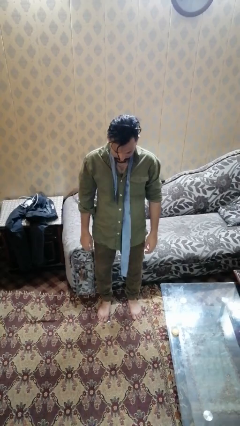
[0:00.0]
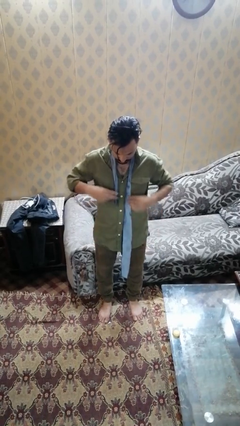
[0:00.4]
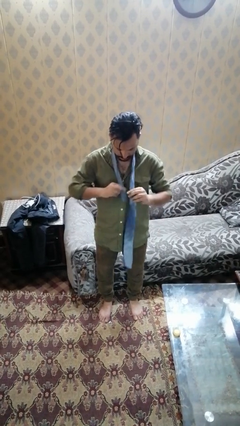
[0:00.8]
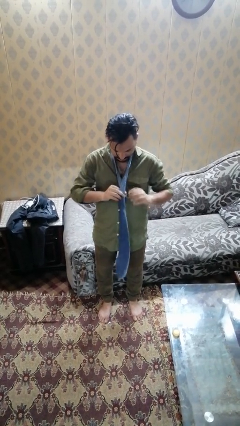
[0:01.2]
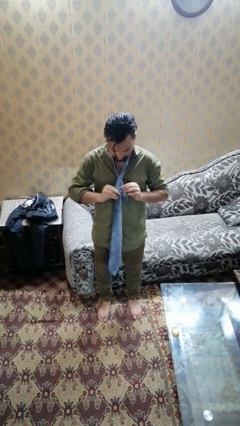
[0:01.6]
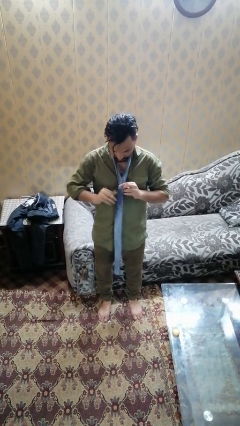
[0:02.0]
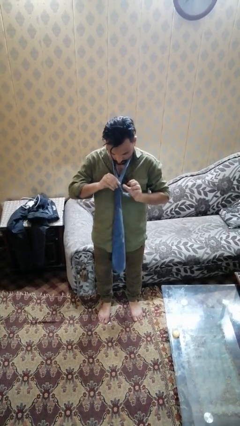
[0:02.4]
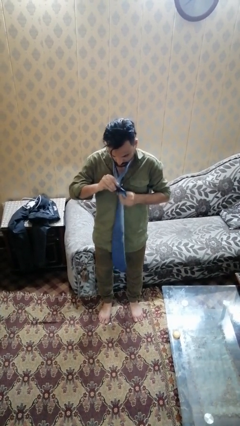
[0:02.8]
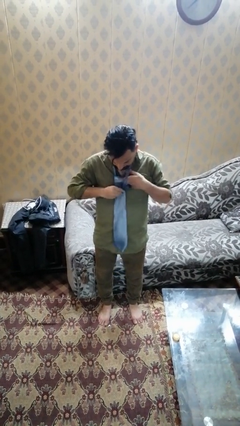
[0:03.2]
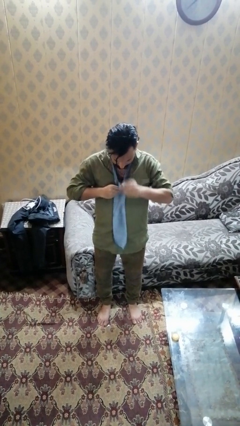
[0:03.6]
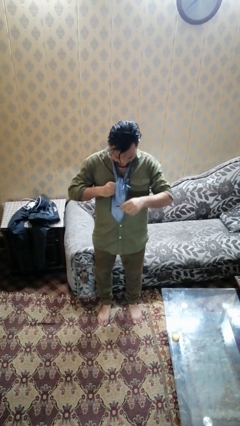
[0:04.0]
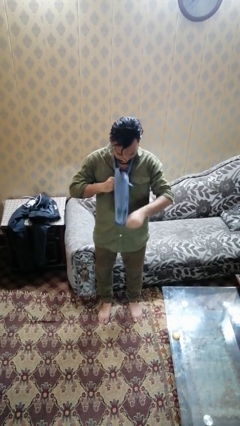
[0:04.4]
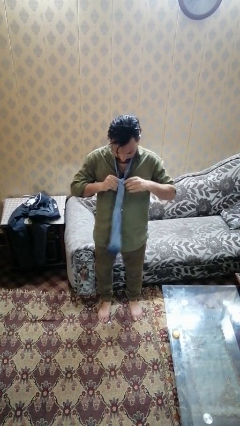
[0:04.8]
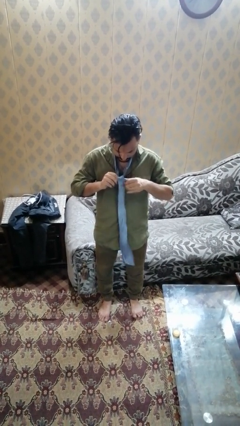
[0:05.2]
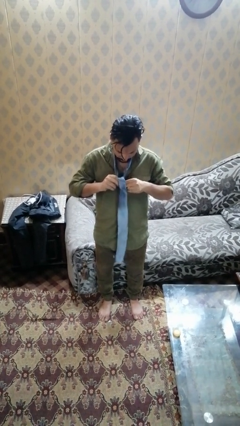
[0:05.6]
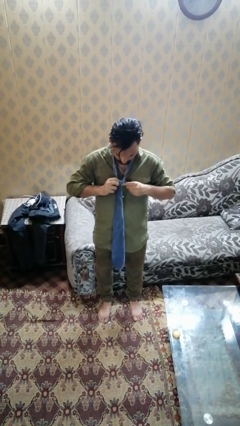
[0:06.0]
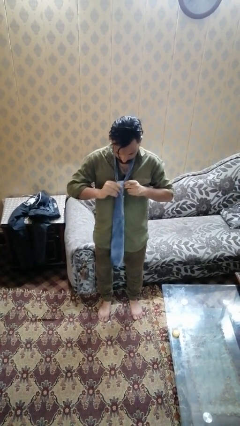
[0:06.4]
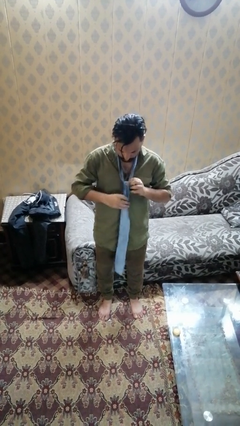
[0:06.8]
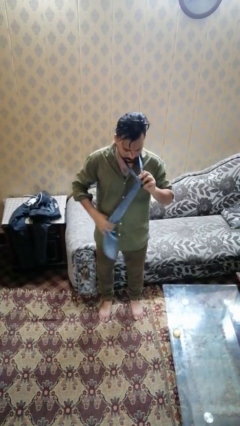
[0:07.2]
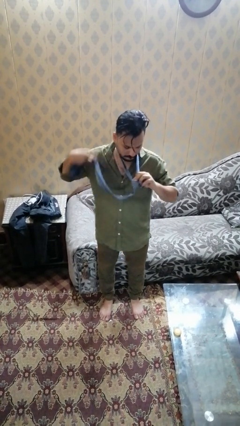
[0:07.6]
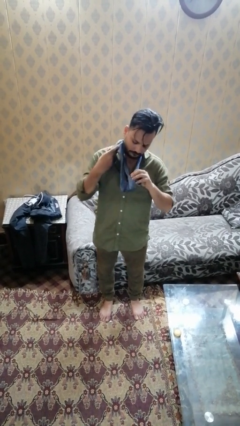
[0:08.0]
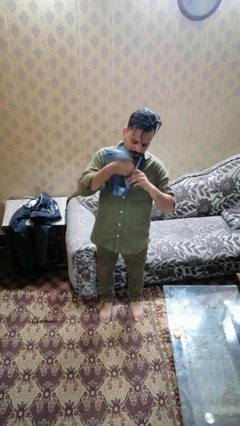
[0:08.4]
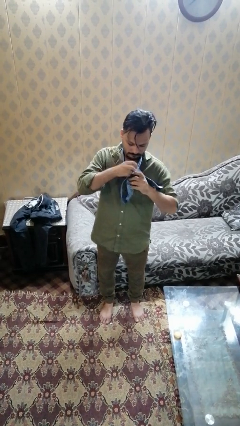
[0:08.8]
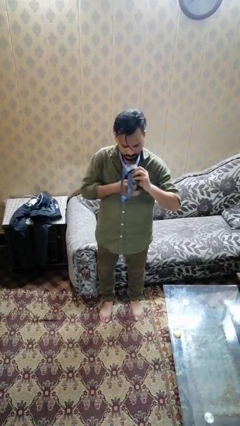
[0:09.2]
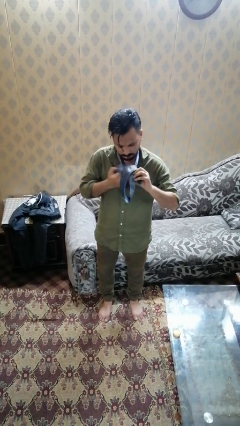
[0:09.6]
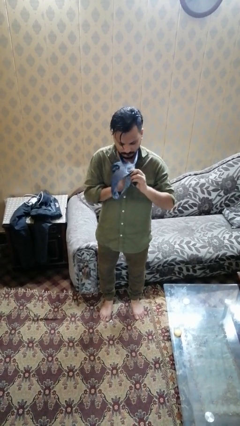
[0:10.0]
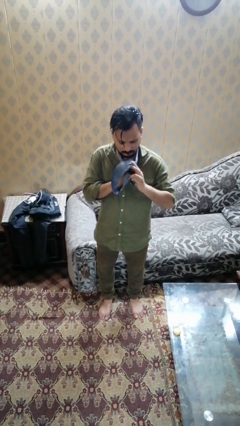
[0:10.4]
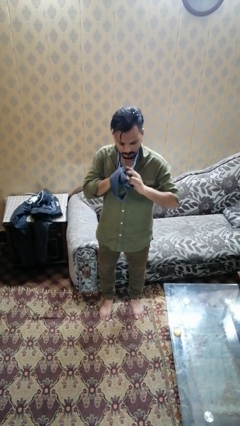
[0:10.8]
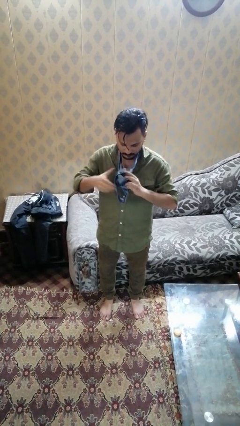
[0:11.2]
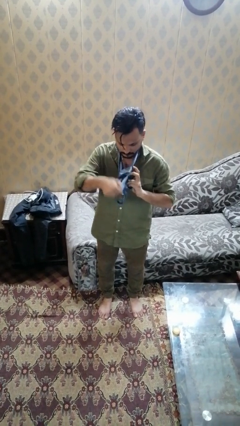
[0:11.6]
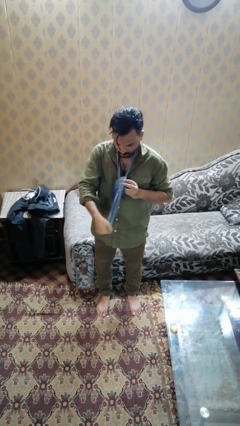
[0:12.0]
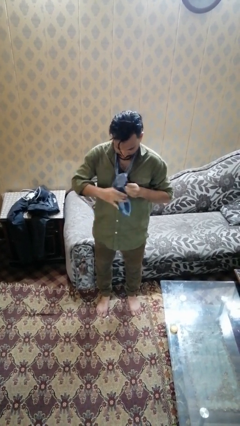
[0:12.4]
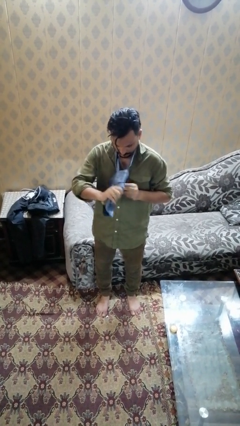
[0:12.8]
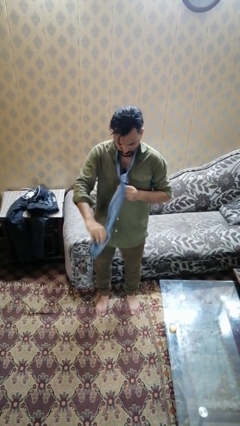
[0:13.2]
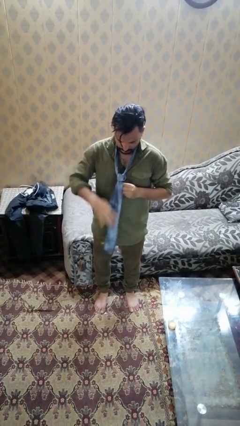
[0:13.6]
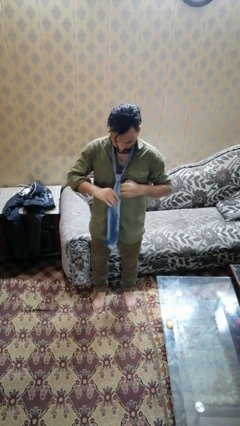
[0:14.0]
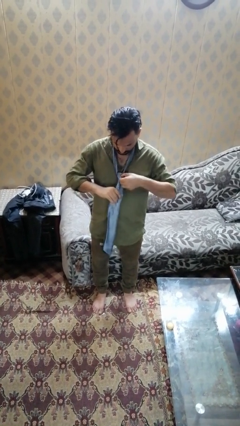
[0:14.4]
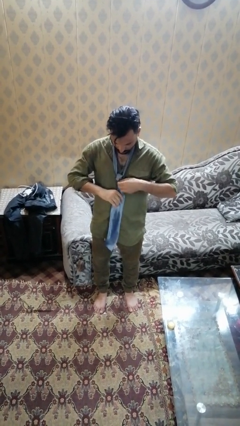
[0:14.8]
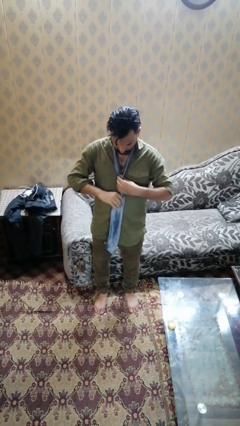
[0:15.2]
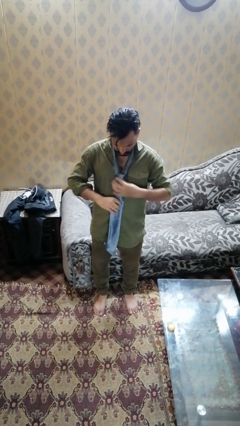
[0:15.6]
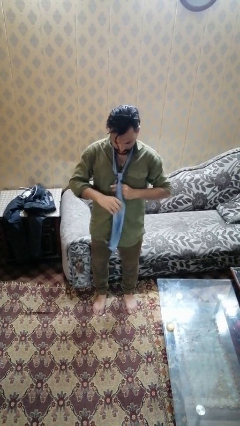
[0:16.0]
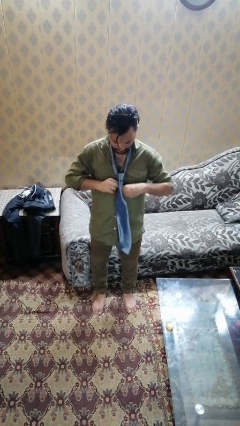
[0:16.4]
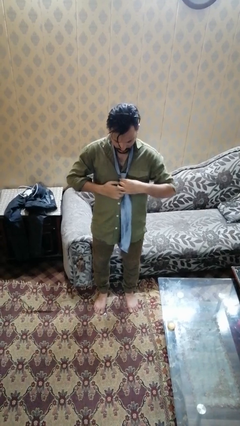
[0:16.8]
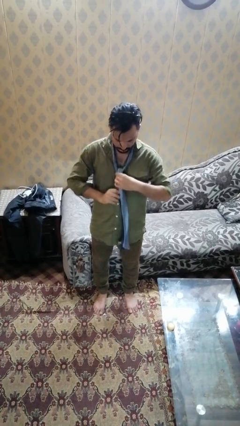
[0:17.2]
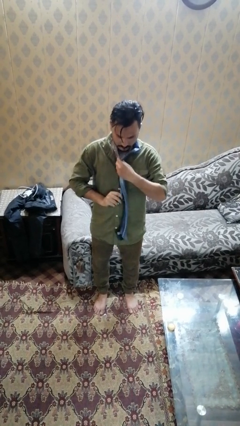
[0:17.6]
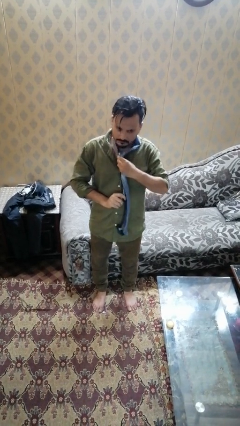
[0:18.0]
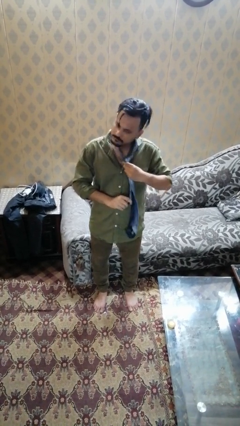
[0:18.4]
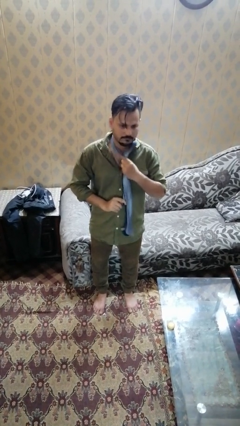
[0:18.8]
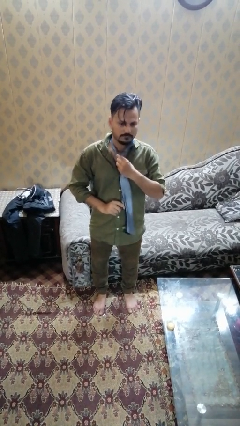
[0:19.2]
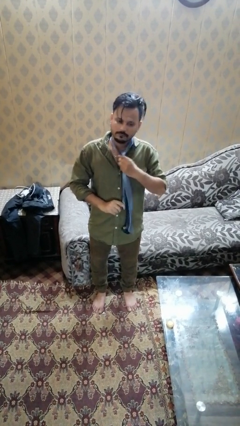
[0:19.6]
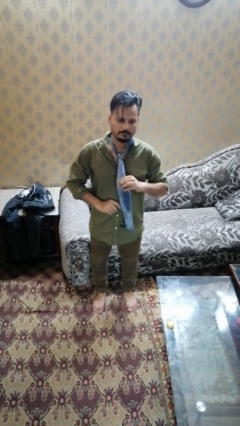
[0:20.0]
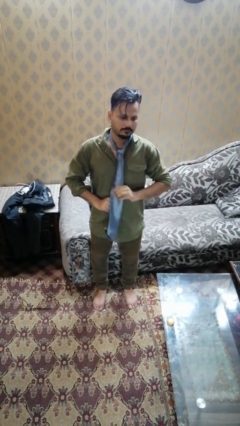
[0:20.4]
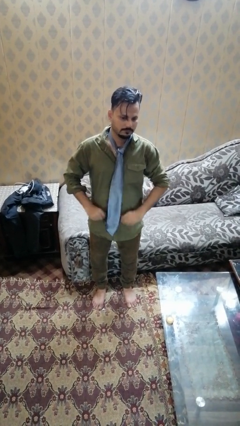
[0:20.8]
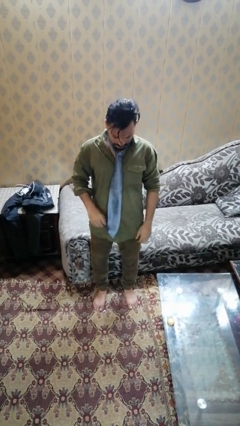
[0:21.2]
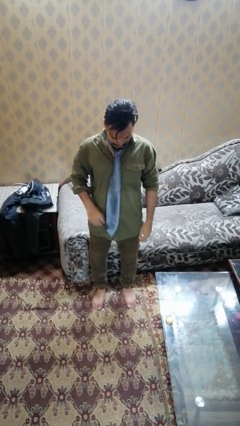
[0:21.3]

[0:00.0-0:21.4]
person puts on necktie

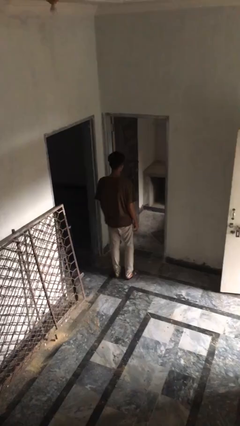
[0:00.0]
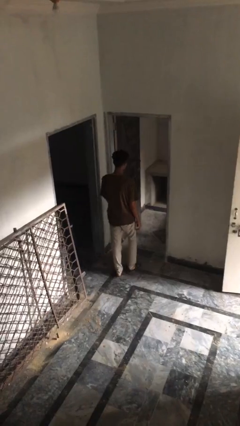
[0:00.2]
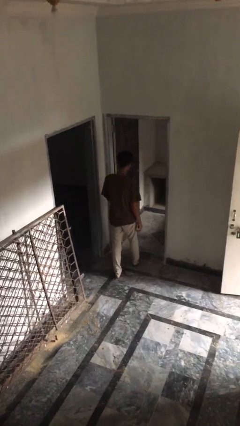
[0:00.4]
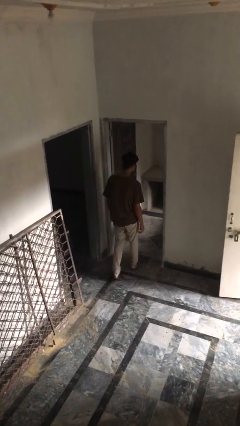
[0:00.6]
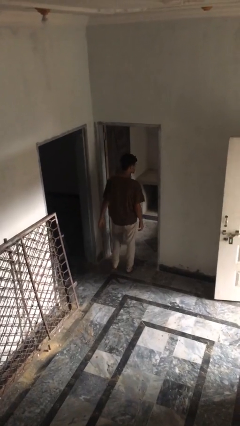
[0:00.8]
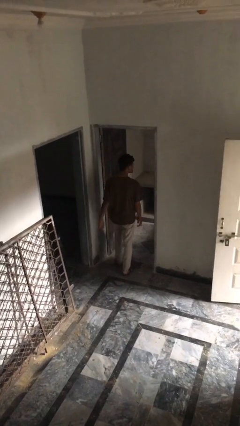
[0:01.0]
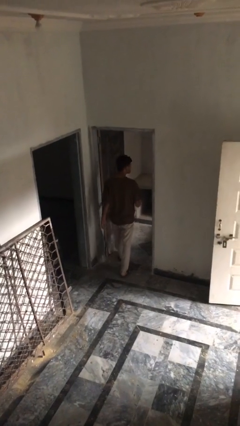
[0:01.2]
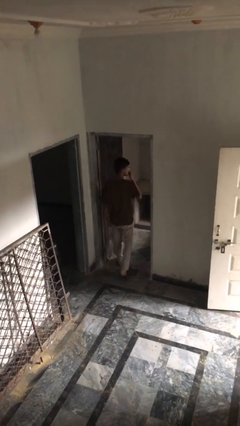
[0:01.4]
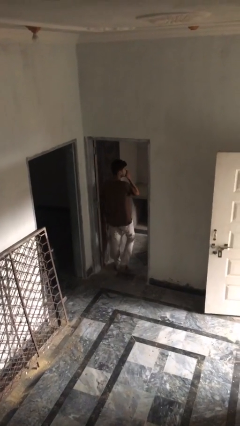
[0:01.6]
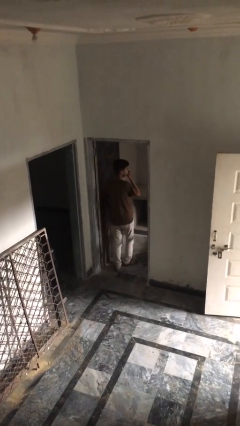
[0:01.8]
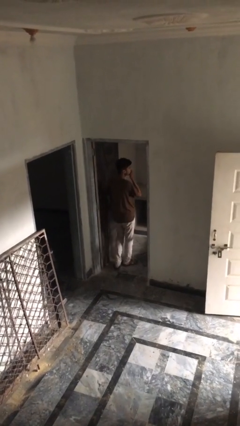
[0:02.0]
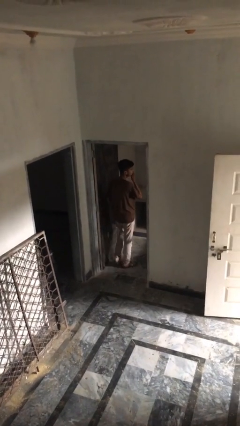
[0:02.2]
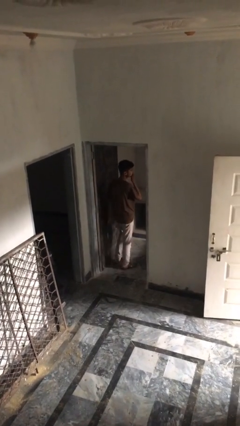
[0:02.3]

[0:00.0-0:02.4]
person exits scene through structure

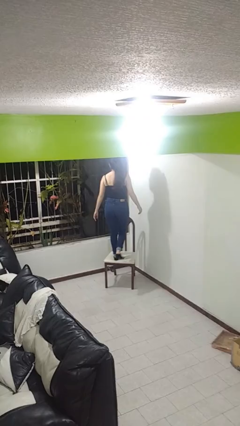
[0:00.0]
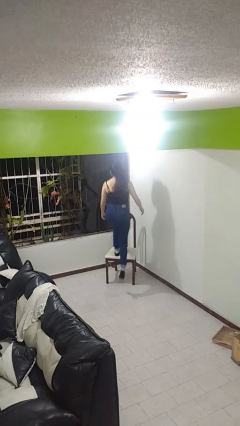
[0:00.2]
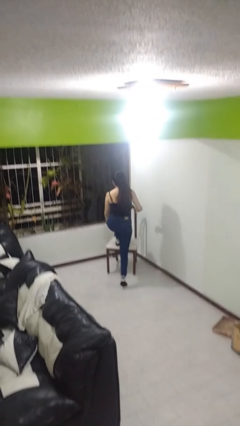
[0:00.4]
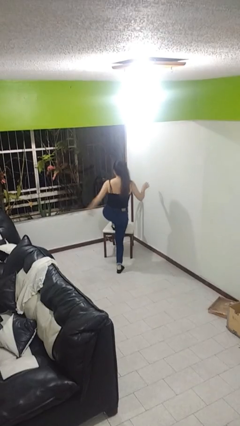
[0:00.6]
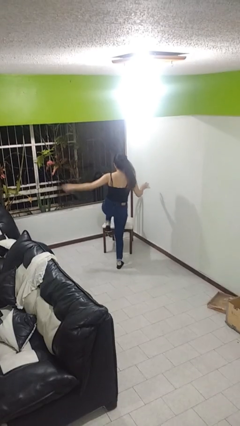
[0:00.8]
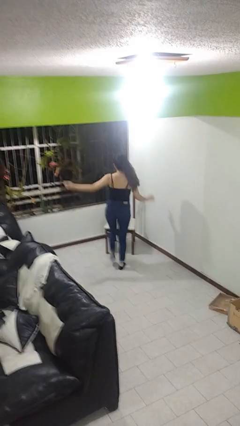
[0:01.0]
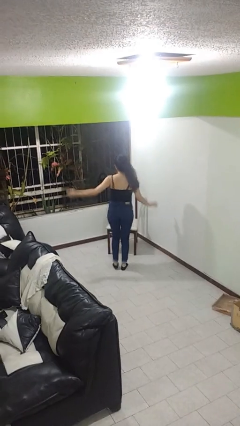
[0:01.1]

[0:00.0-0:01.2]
person climbs off chair

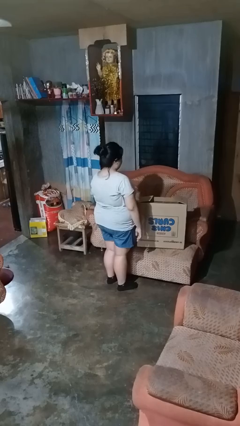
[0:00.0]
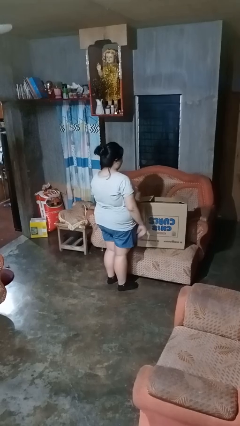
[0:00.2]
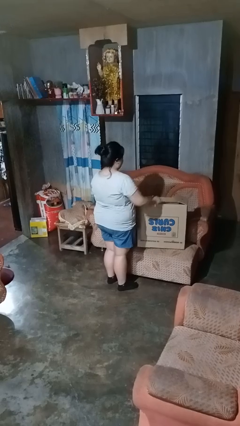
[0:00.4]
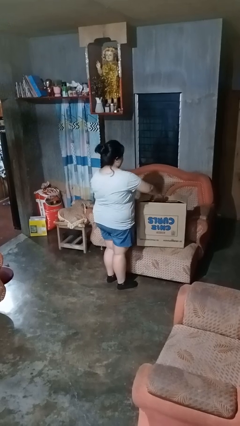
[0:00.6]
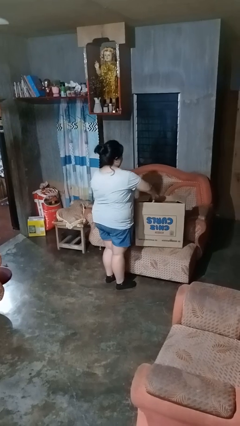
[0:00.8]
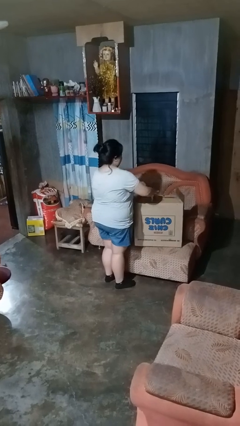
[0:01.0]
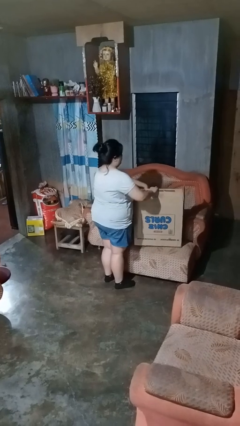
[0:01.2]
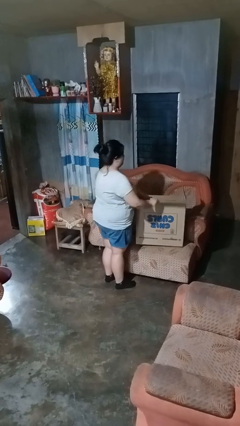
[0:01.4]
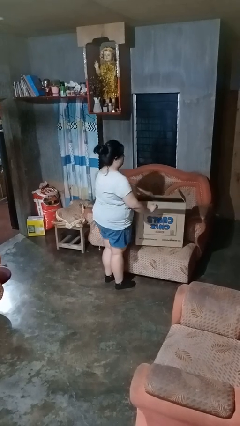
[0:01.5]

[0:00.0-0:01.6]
person opens box

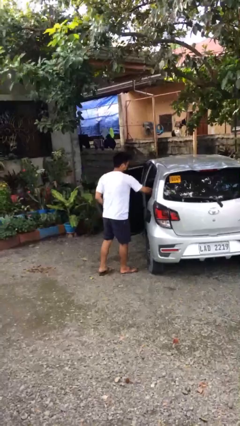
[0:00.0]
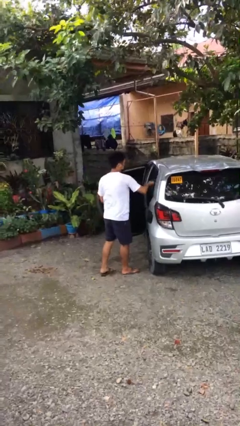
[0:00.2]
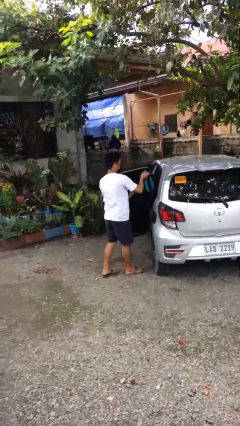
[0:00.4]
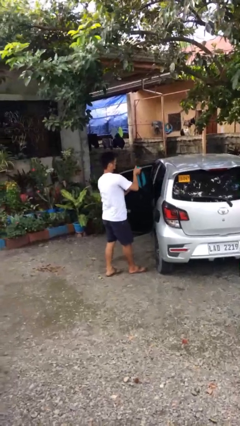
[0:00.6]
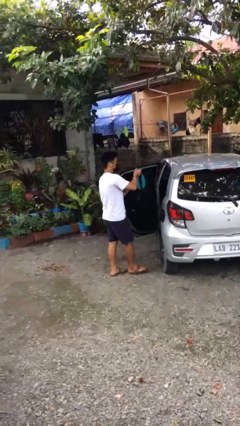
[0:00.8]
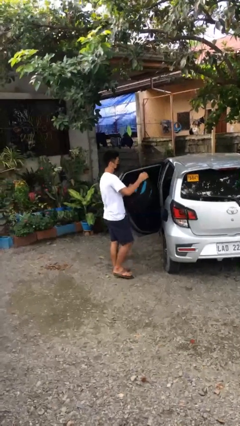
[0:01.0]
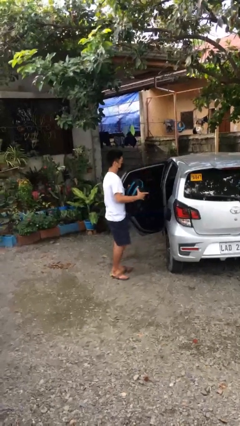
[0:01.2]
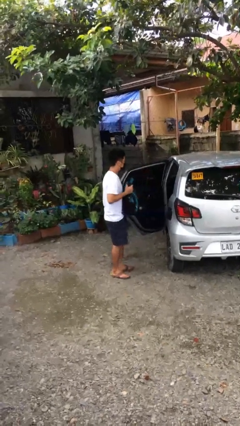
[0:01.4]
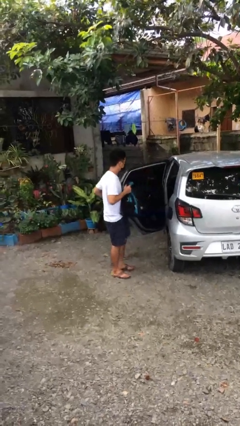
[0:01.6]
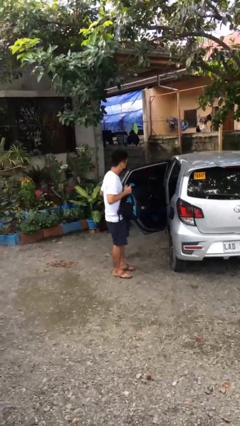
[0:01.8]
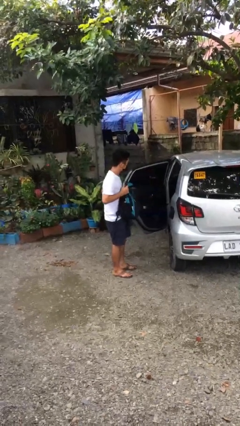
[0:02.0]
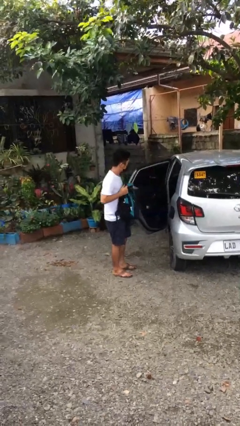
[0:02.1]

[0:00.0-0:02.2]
person unloads car
